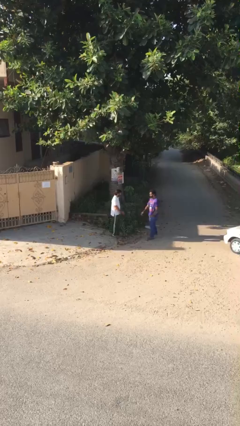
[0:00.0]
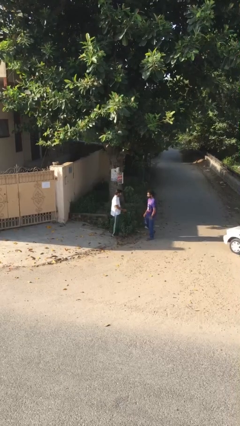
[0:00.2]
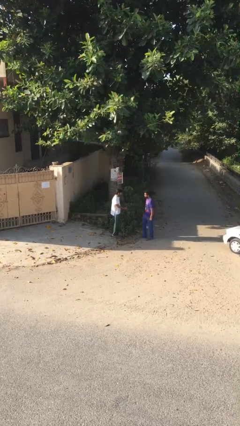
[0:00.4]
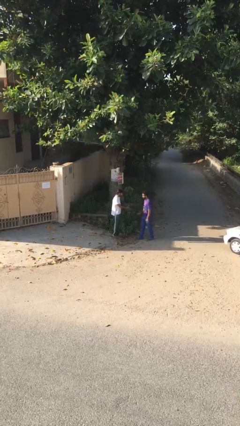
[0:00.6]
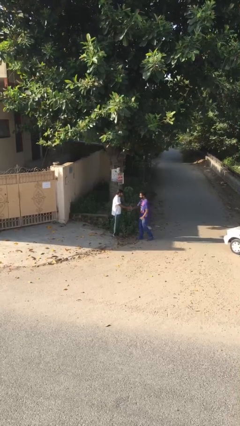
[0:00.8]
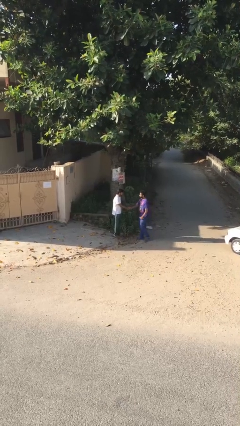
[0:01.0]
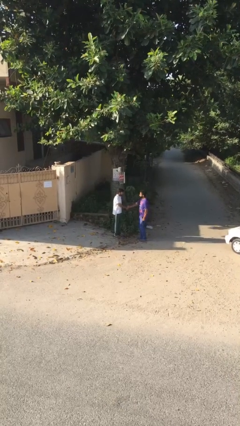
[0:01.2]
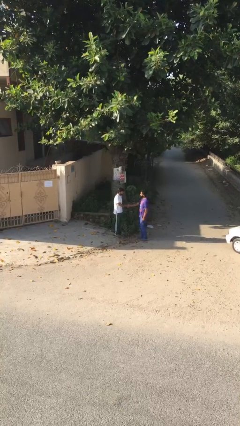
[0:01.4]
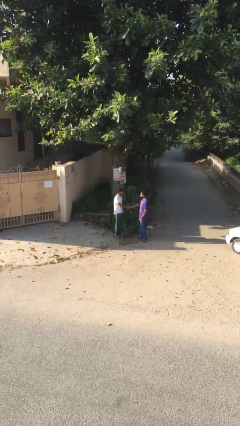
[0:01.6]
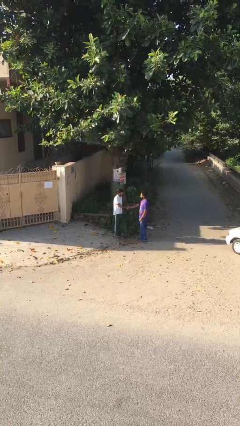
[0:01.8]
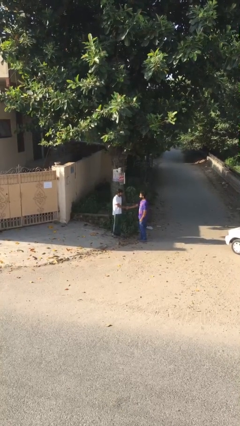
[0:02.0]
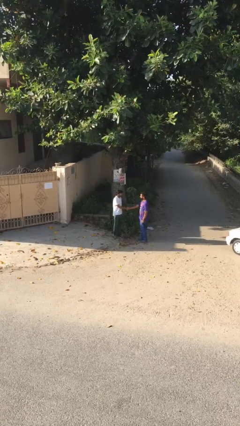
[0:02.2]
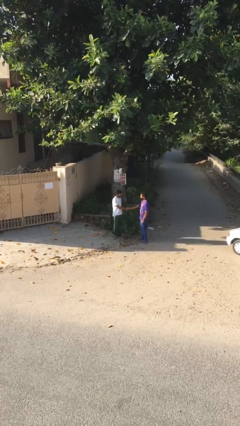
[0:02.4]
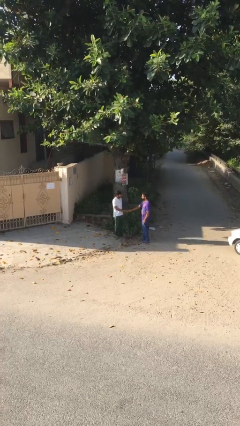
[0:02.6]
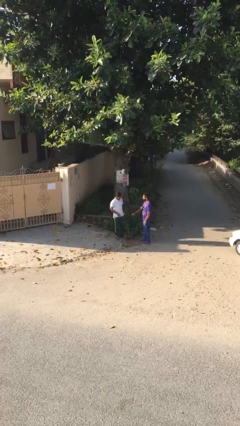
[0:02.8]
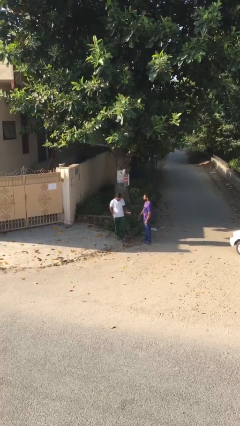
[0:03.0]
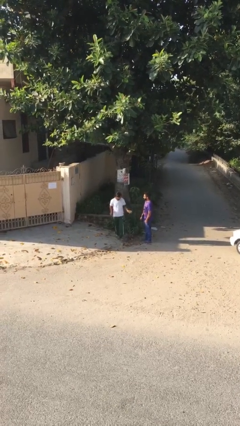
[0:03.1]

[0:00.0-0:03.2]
person shakes hand

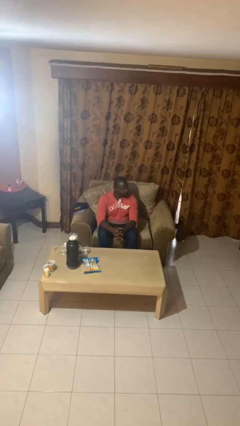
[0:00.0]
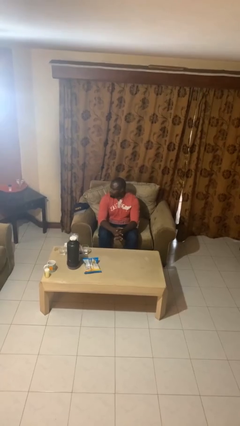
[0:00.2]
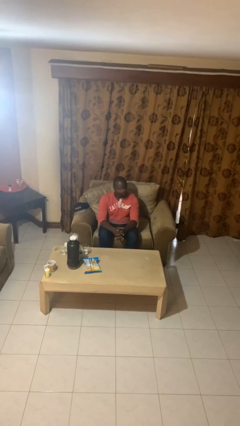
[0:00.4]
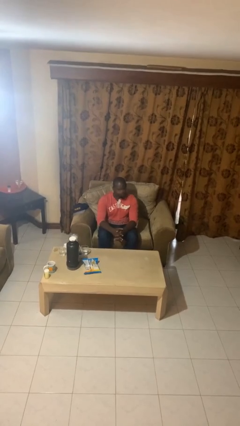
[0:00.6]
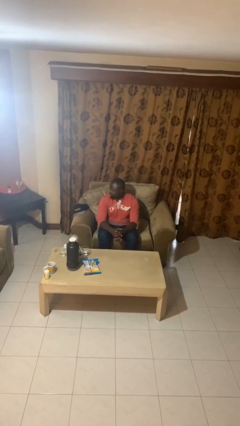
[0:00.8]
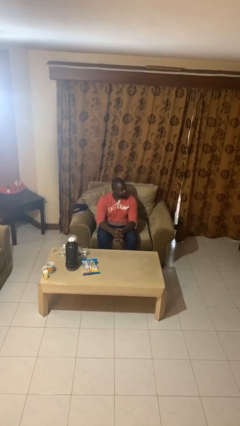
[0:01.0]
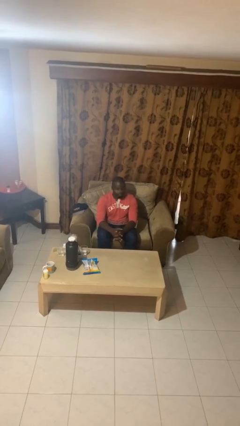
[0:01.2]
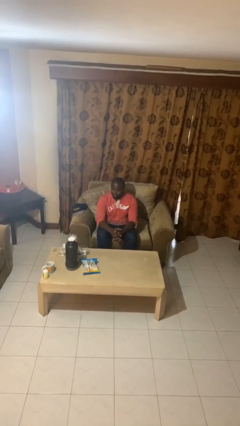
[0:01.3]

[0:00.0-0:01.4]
person shakes head

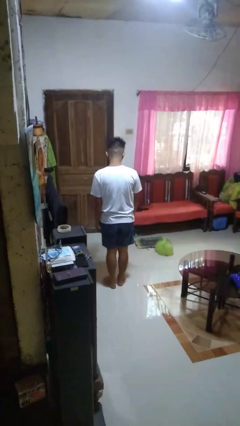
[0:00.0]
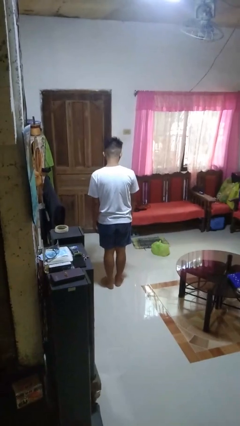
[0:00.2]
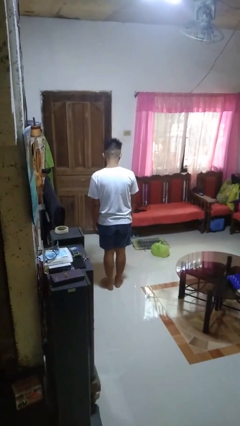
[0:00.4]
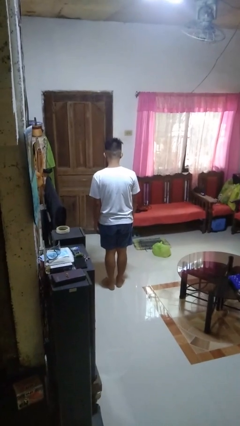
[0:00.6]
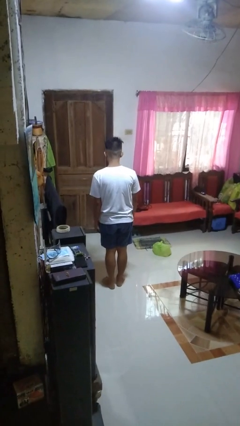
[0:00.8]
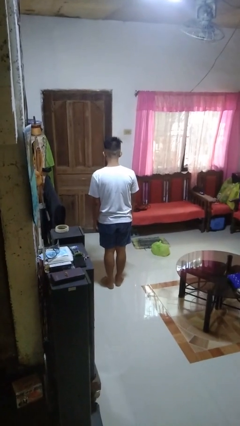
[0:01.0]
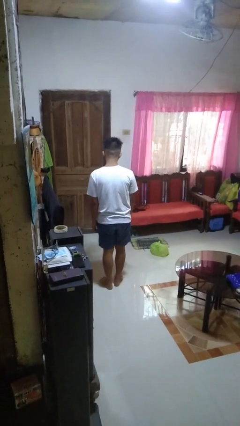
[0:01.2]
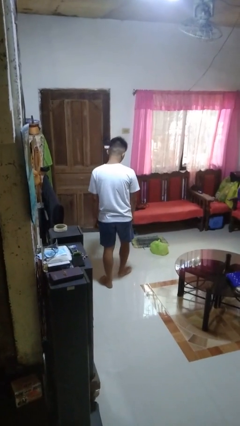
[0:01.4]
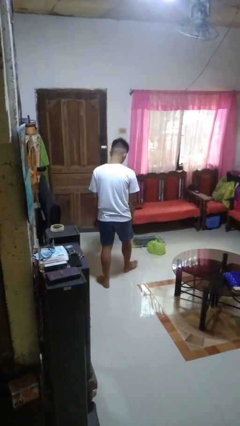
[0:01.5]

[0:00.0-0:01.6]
person throws object to ground

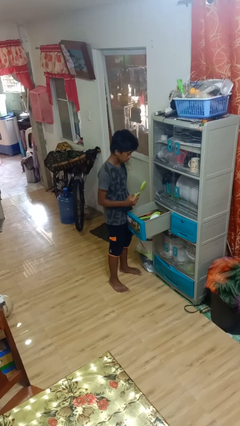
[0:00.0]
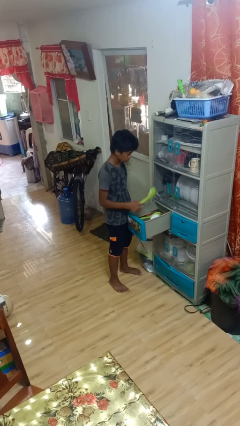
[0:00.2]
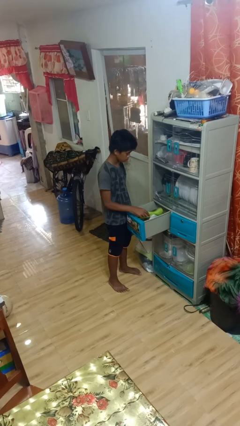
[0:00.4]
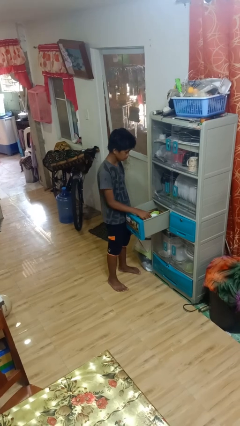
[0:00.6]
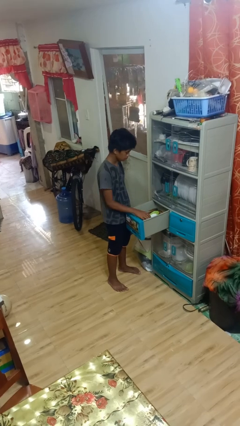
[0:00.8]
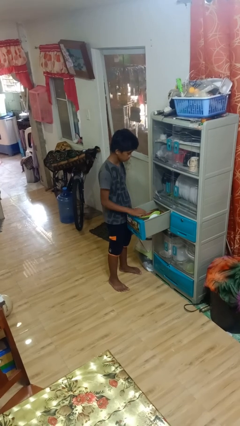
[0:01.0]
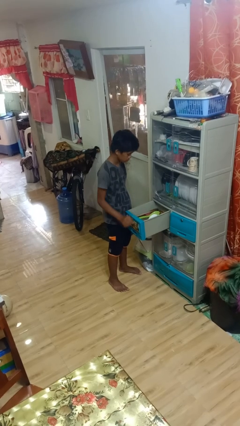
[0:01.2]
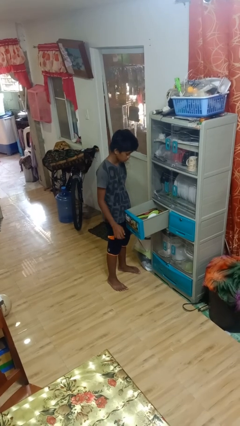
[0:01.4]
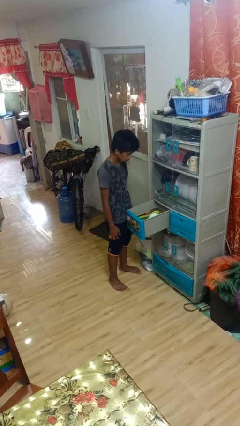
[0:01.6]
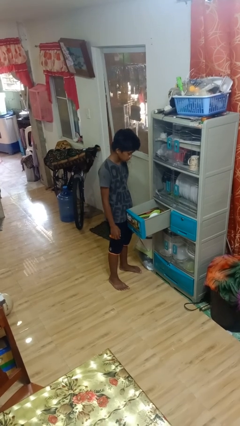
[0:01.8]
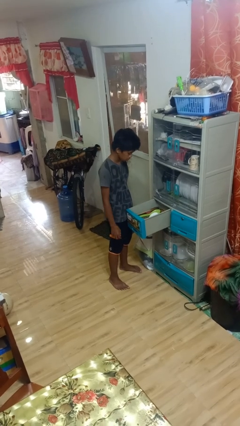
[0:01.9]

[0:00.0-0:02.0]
person puts object into kitchen drawer

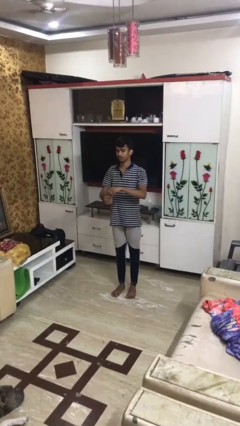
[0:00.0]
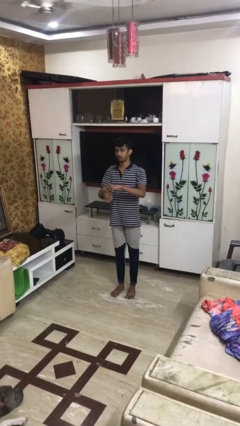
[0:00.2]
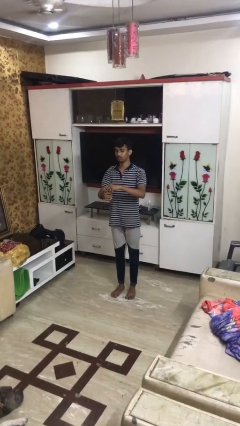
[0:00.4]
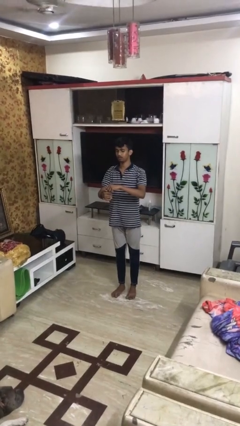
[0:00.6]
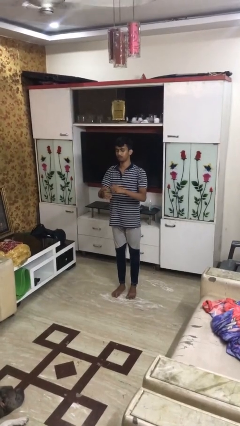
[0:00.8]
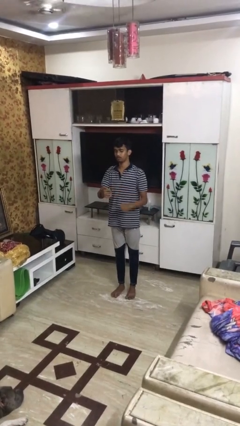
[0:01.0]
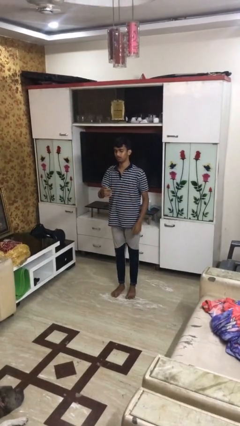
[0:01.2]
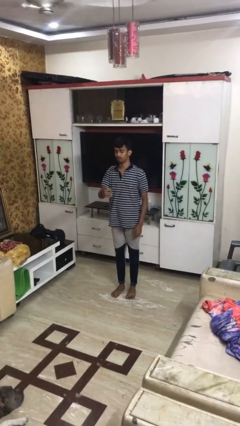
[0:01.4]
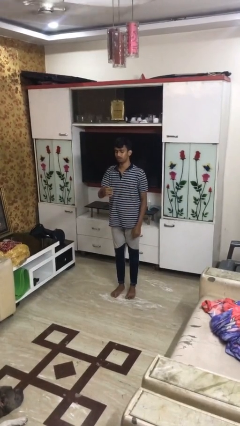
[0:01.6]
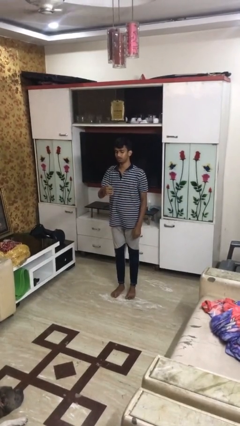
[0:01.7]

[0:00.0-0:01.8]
person opens beverage can

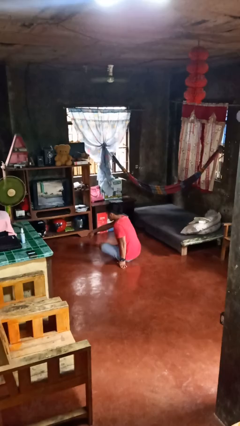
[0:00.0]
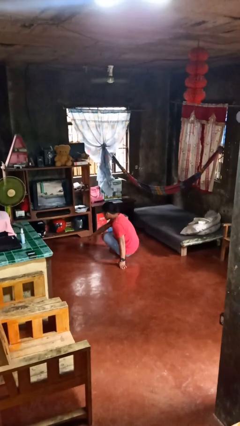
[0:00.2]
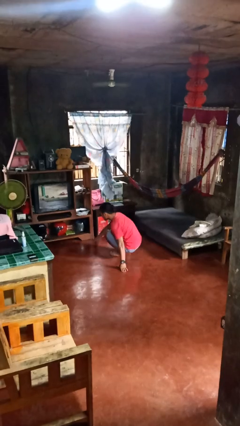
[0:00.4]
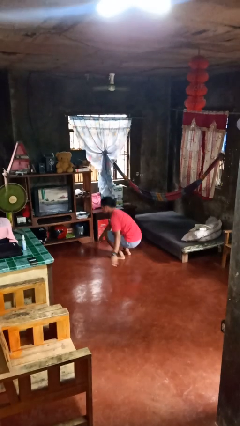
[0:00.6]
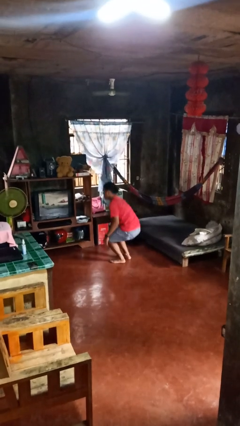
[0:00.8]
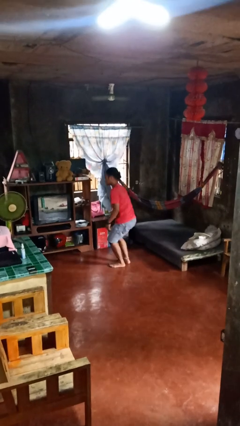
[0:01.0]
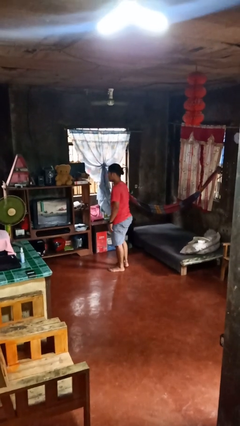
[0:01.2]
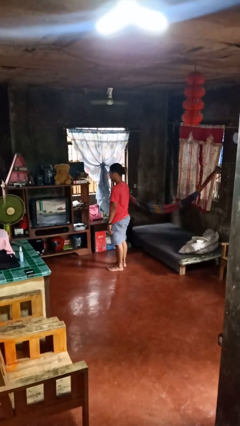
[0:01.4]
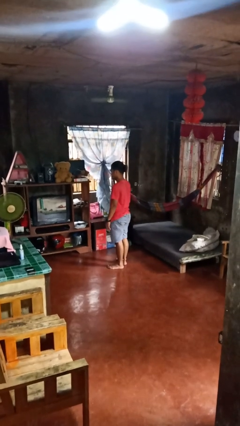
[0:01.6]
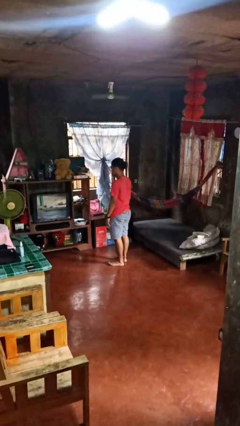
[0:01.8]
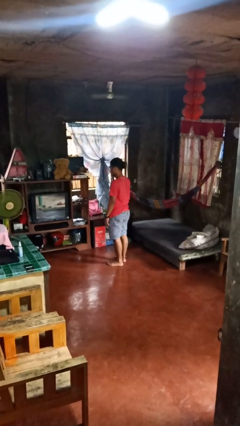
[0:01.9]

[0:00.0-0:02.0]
person stands up from floor

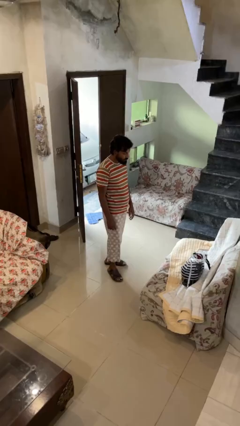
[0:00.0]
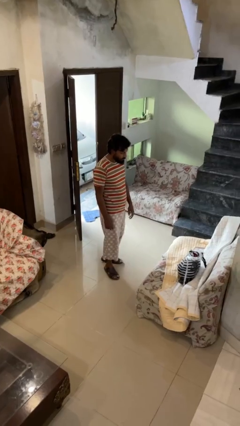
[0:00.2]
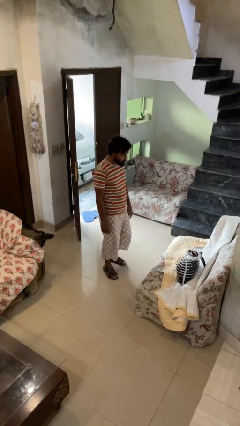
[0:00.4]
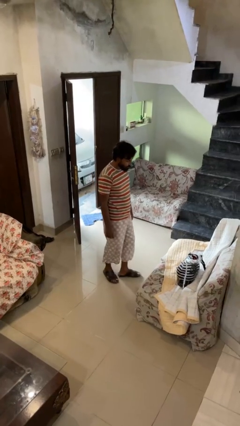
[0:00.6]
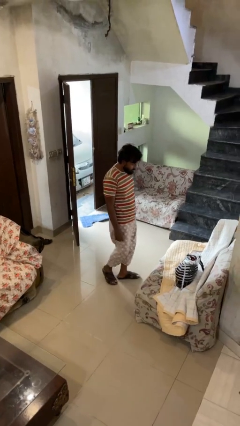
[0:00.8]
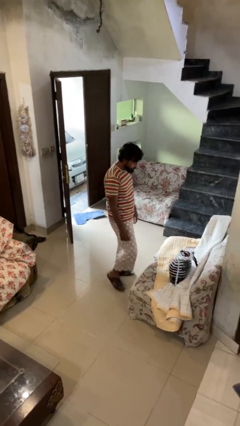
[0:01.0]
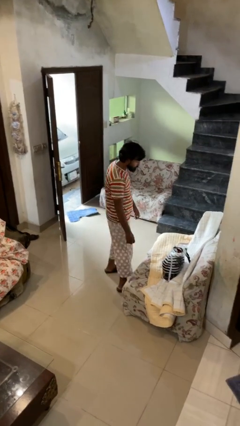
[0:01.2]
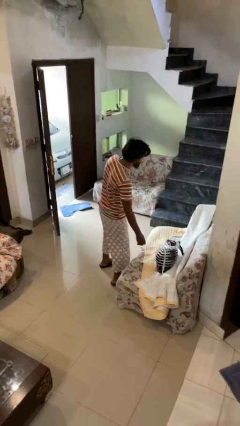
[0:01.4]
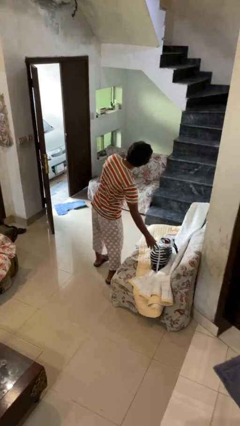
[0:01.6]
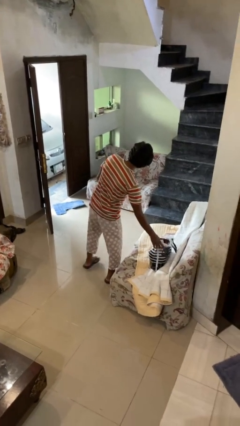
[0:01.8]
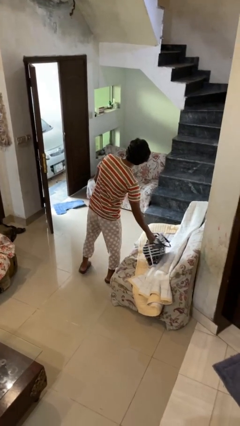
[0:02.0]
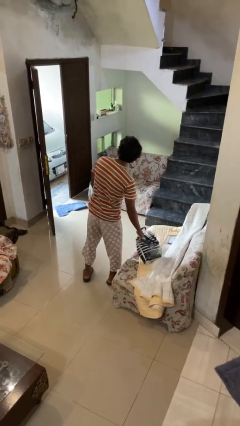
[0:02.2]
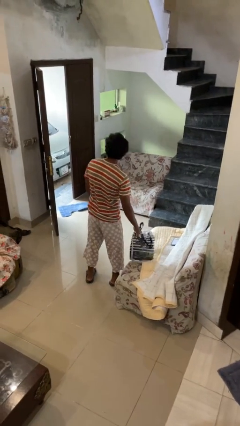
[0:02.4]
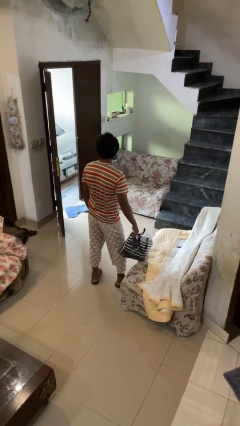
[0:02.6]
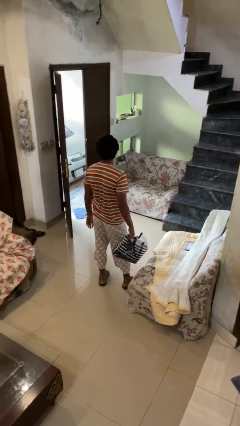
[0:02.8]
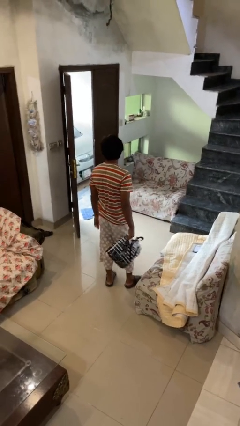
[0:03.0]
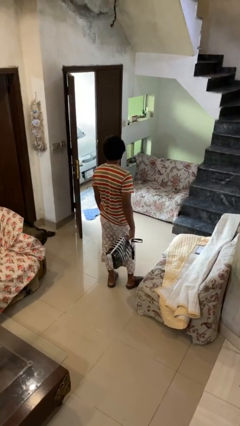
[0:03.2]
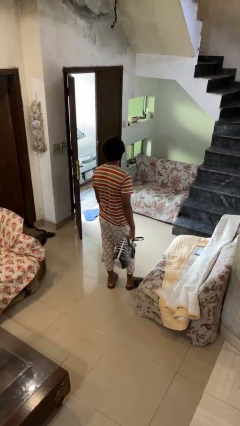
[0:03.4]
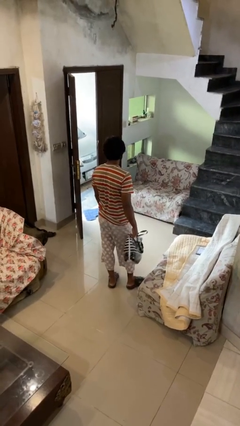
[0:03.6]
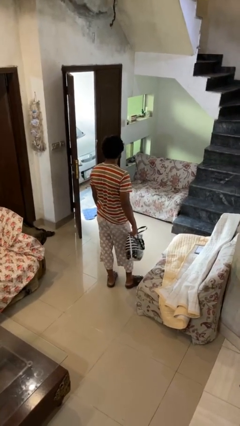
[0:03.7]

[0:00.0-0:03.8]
person picks up object from couch

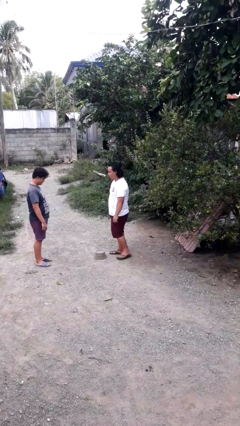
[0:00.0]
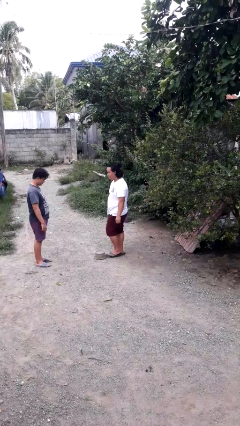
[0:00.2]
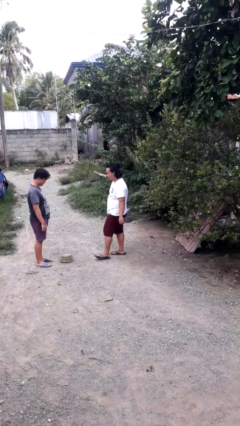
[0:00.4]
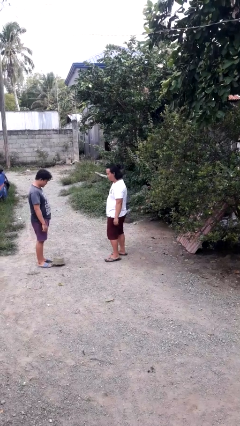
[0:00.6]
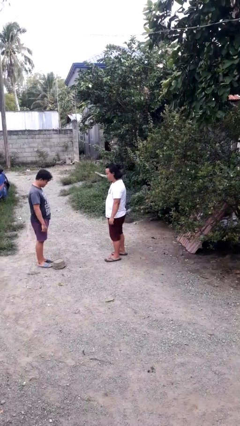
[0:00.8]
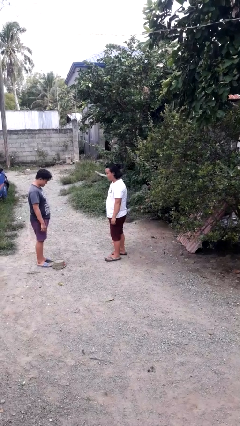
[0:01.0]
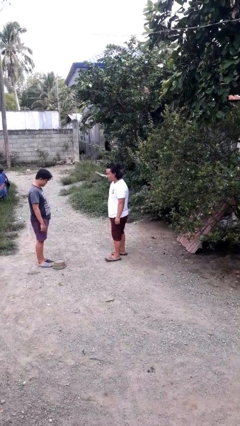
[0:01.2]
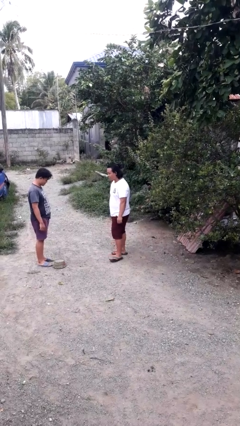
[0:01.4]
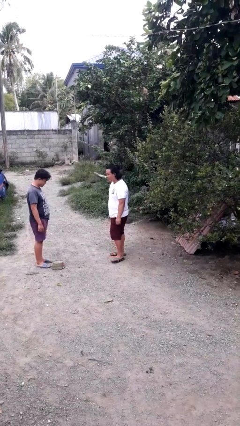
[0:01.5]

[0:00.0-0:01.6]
person kicks object to person
